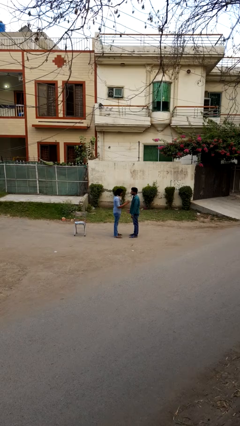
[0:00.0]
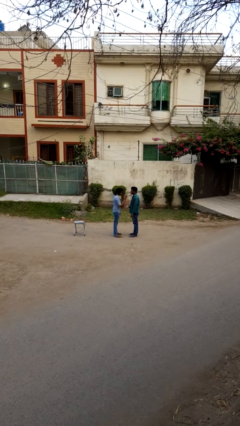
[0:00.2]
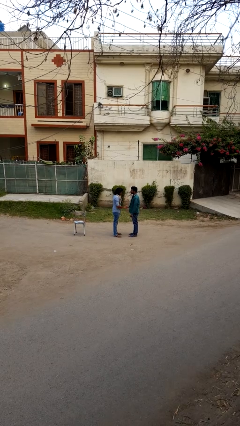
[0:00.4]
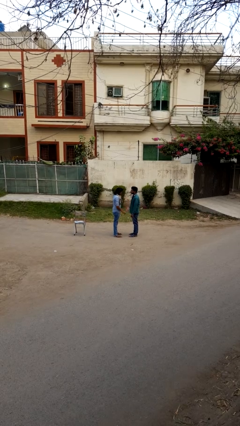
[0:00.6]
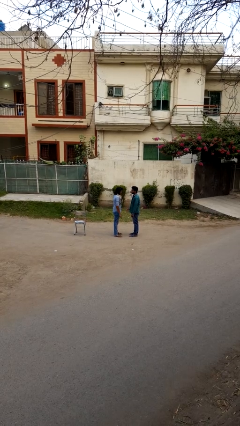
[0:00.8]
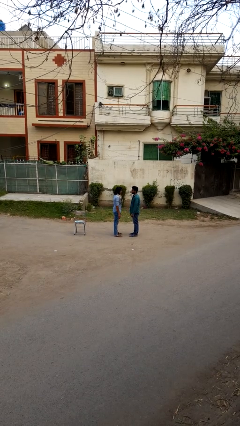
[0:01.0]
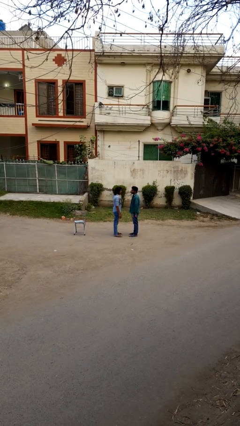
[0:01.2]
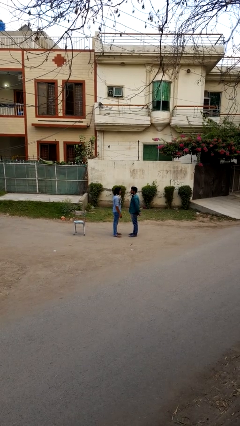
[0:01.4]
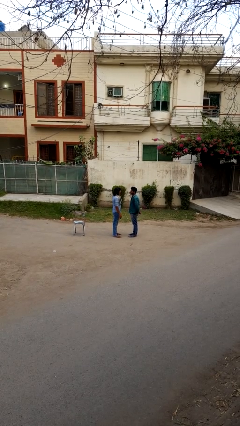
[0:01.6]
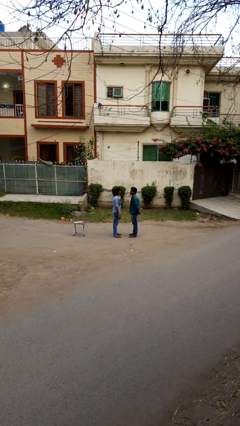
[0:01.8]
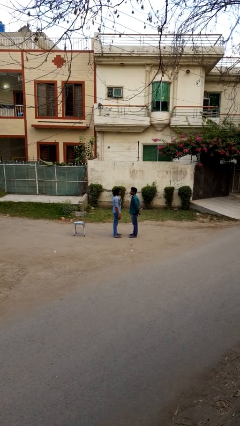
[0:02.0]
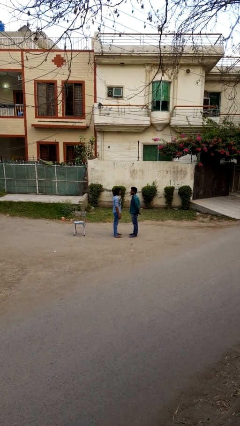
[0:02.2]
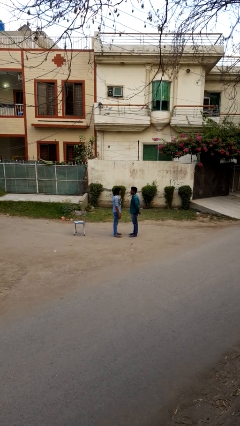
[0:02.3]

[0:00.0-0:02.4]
person highfives hand

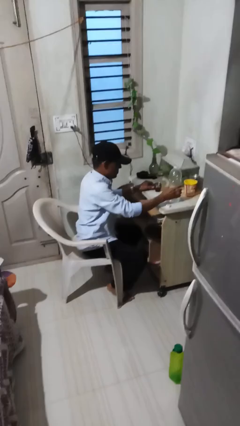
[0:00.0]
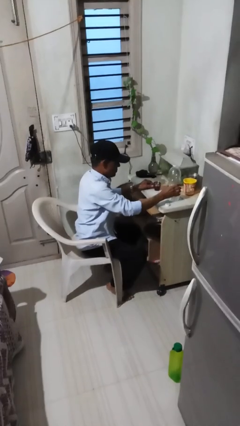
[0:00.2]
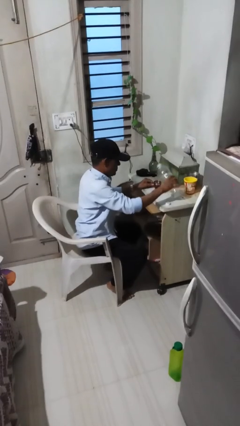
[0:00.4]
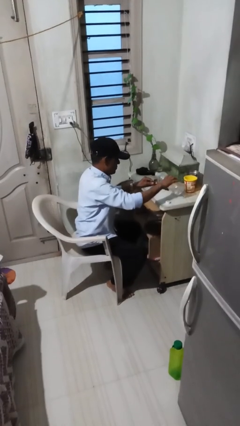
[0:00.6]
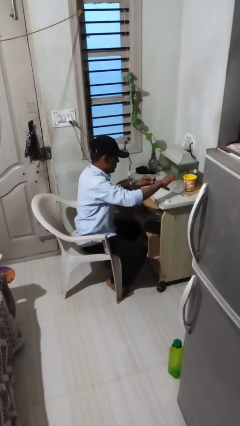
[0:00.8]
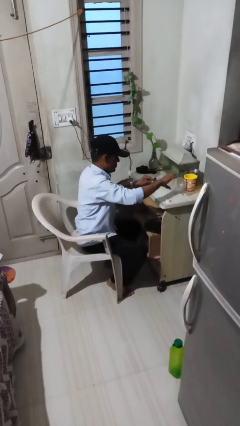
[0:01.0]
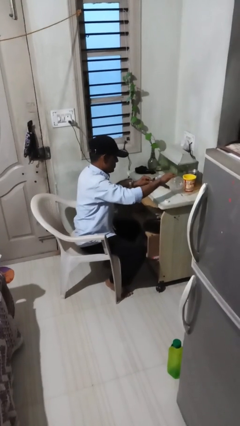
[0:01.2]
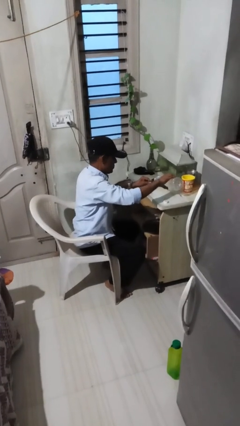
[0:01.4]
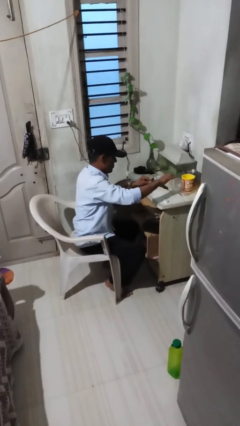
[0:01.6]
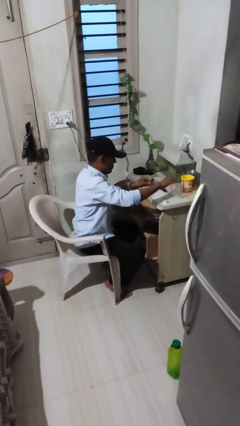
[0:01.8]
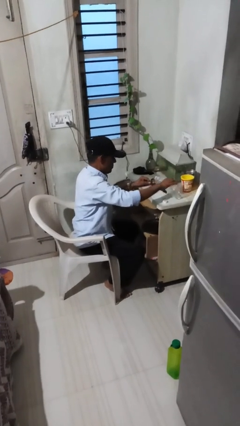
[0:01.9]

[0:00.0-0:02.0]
person pours liquid into cup

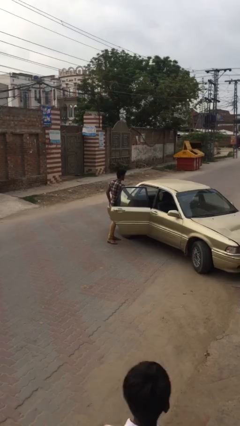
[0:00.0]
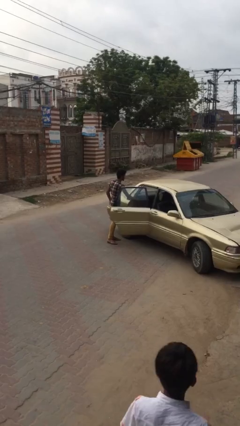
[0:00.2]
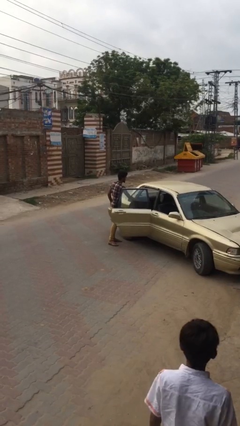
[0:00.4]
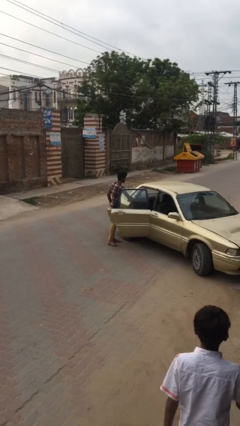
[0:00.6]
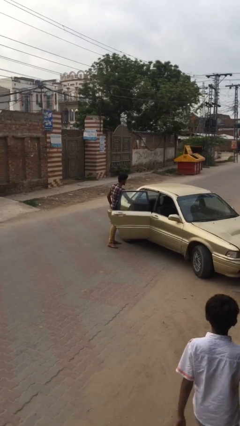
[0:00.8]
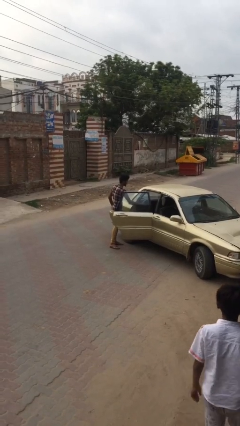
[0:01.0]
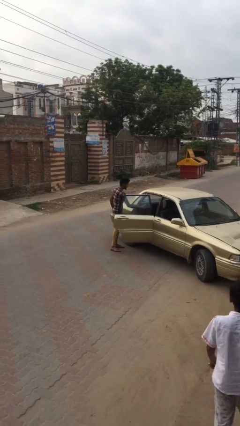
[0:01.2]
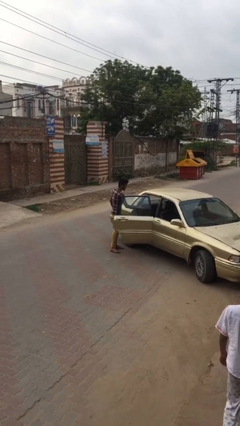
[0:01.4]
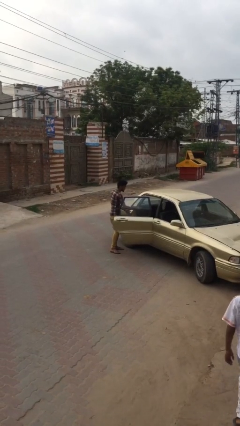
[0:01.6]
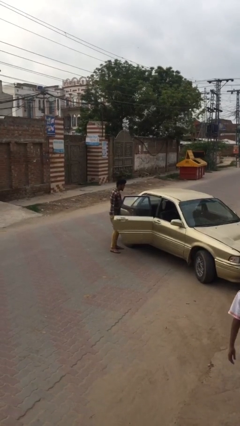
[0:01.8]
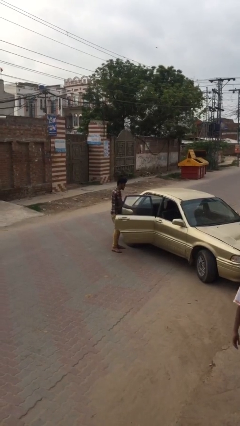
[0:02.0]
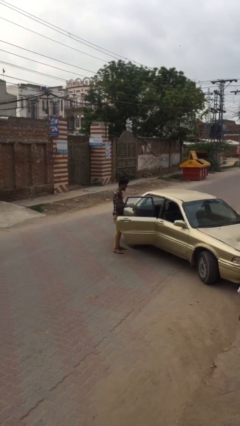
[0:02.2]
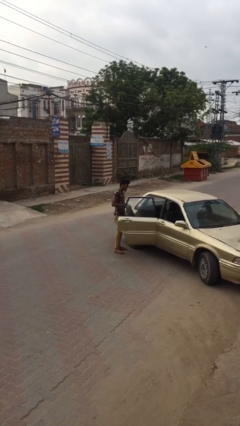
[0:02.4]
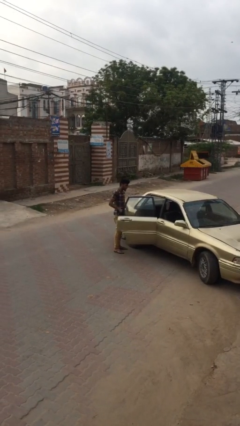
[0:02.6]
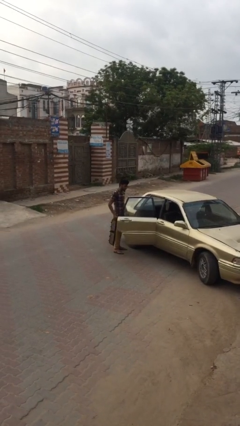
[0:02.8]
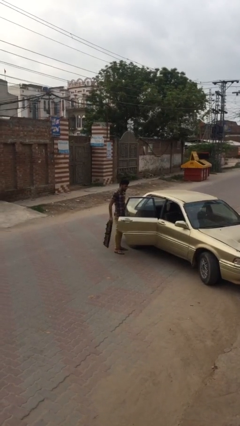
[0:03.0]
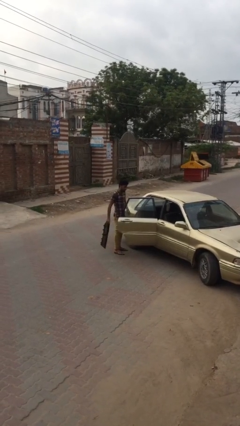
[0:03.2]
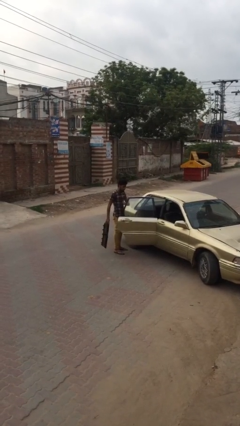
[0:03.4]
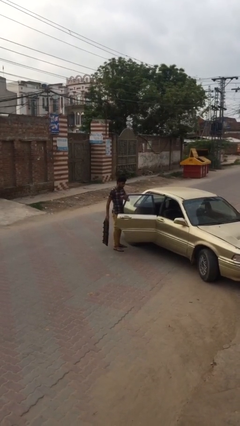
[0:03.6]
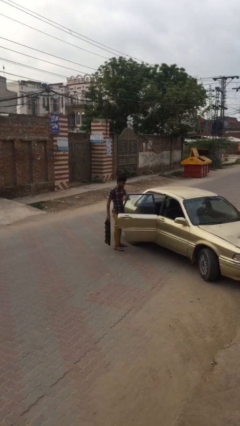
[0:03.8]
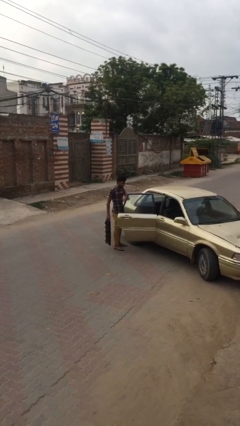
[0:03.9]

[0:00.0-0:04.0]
person unloads car

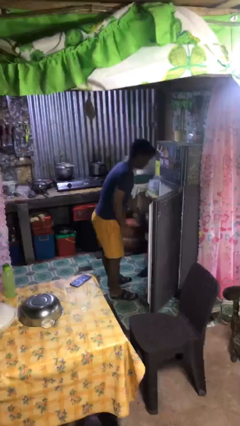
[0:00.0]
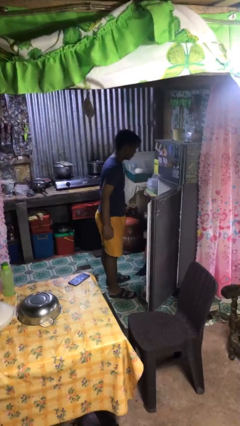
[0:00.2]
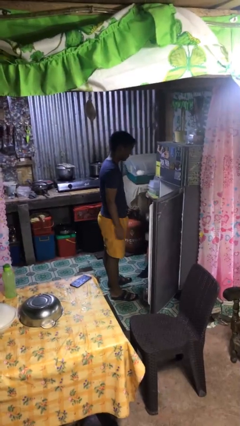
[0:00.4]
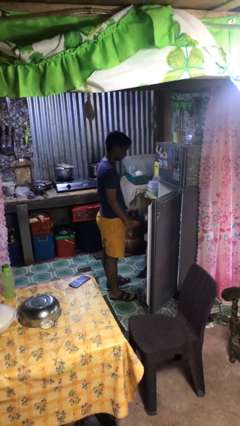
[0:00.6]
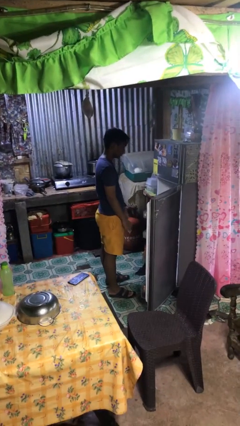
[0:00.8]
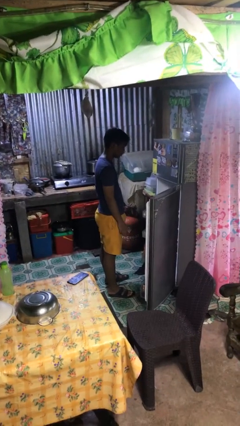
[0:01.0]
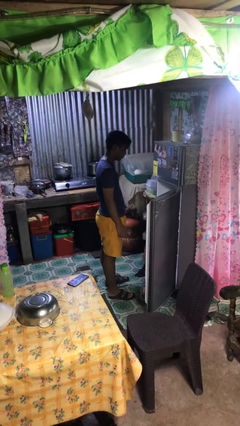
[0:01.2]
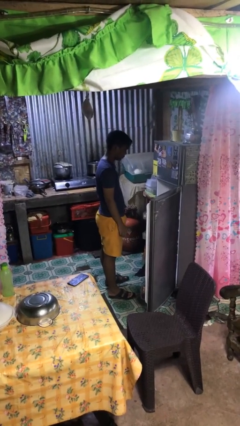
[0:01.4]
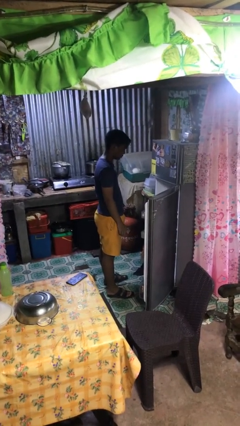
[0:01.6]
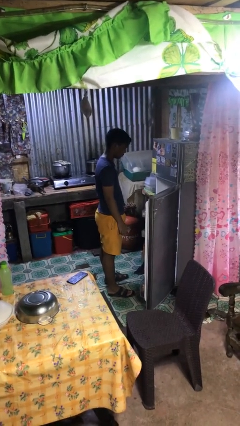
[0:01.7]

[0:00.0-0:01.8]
person takes object from refrigerator

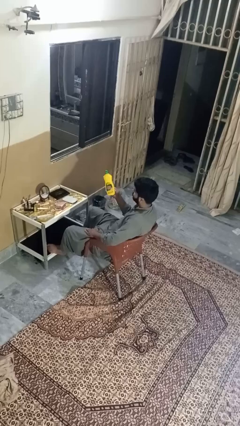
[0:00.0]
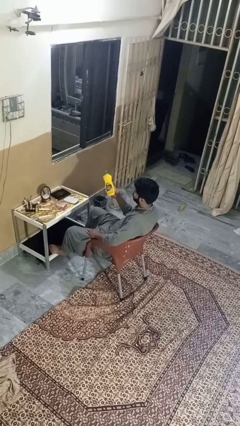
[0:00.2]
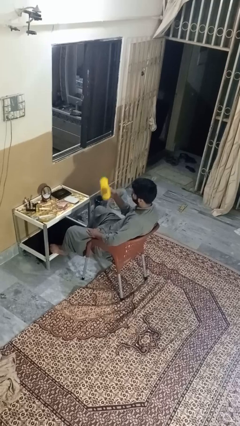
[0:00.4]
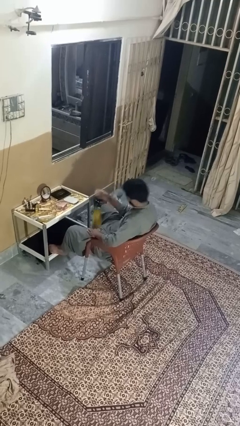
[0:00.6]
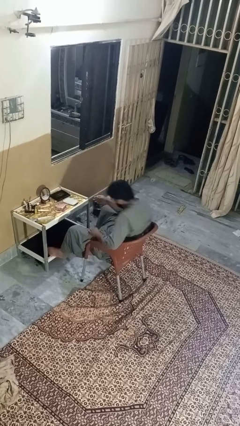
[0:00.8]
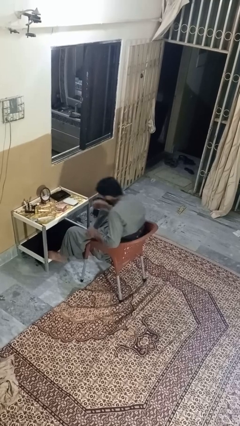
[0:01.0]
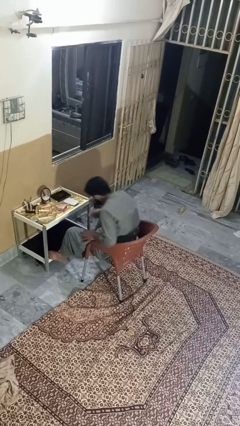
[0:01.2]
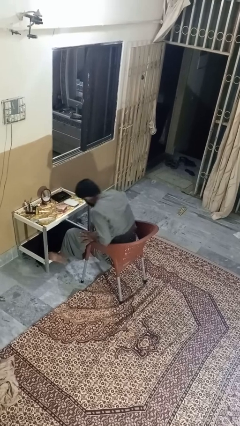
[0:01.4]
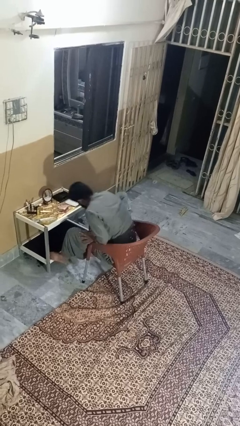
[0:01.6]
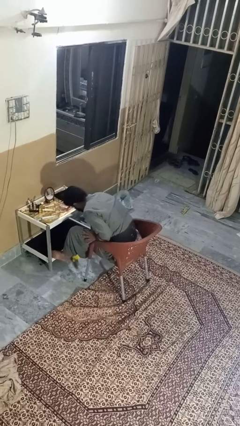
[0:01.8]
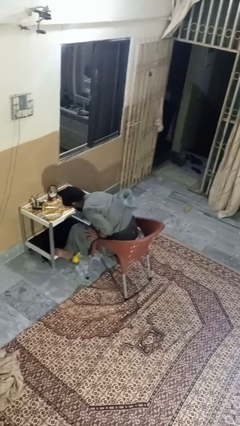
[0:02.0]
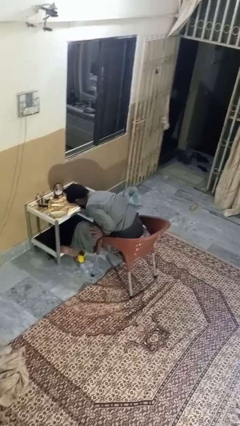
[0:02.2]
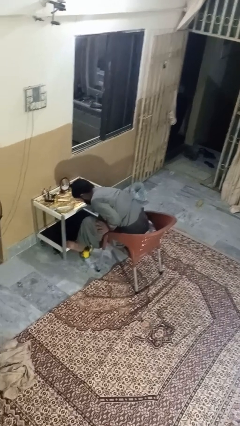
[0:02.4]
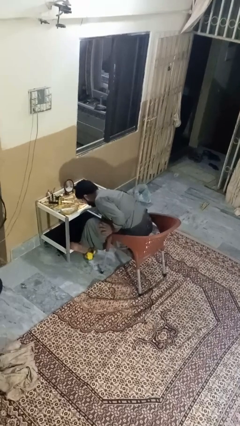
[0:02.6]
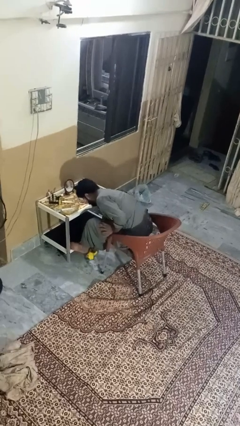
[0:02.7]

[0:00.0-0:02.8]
person throws object to ground

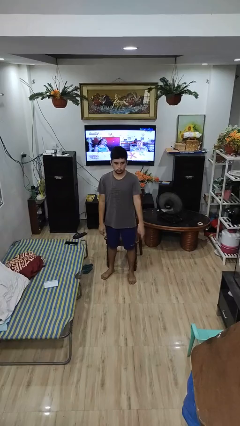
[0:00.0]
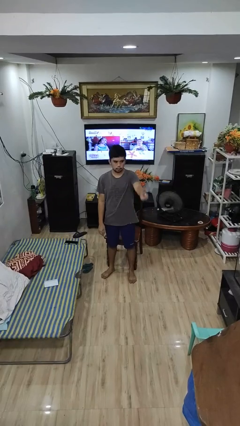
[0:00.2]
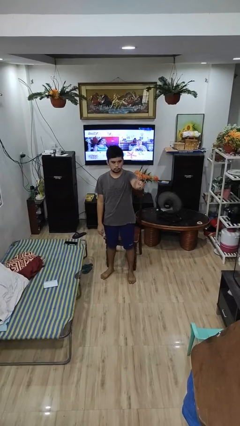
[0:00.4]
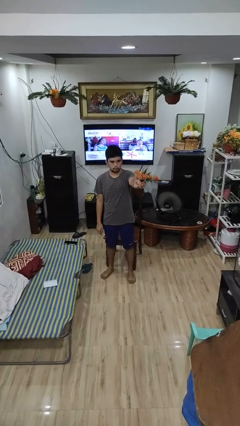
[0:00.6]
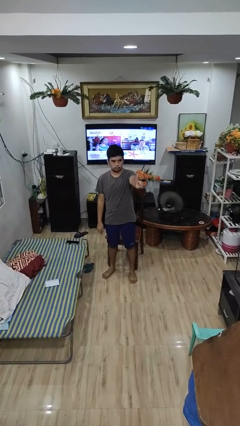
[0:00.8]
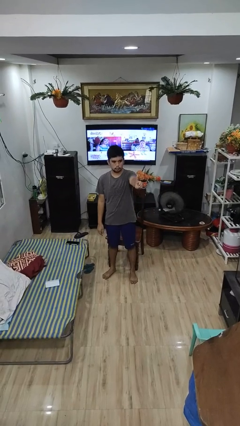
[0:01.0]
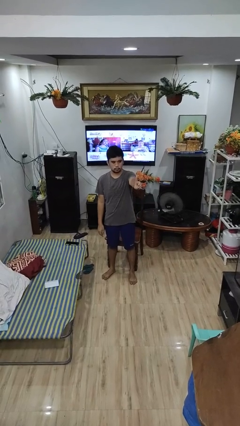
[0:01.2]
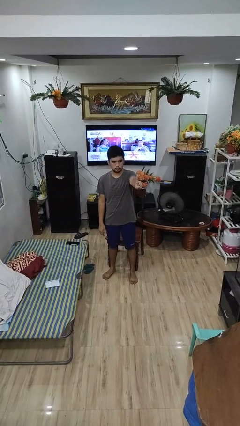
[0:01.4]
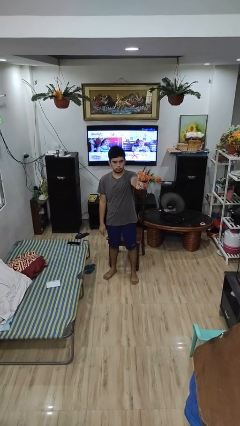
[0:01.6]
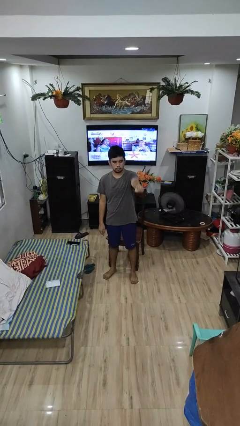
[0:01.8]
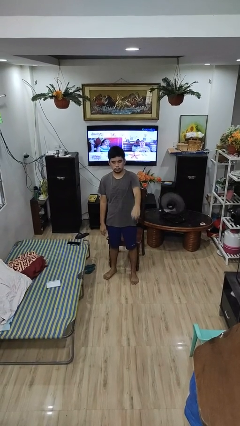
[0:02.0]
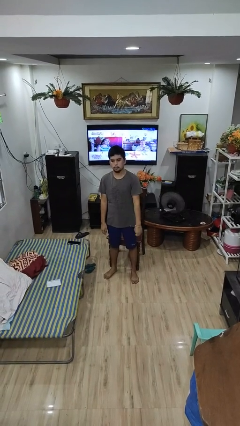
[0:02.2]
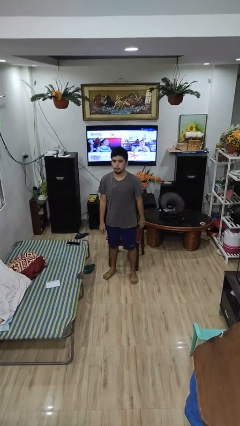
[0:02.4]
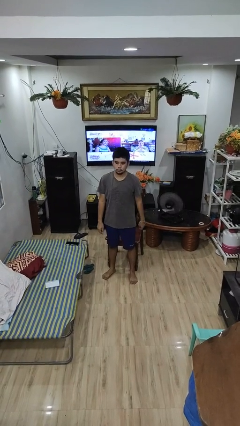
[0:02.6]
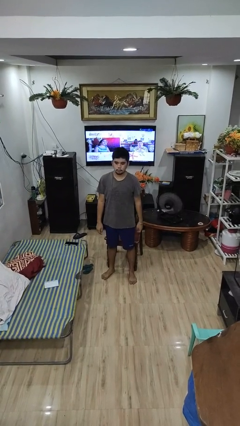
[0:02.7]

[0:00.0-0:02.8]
person gestures number one

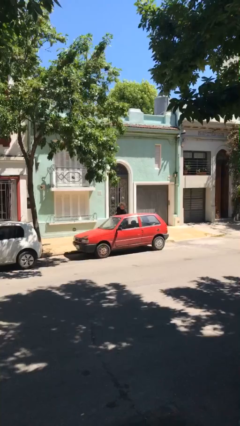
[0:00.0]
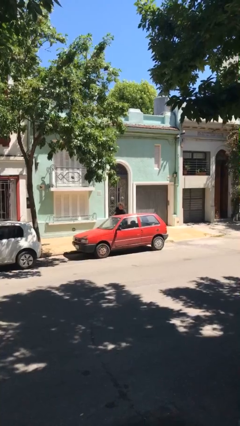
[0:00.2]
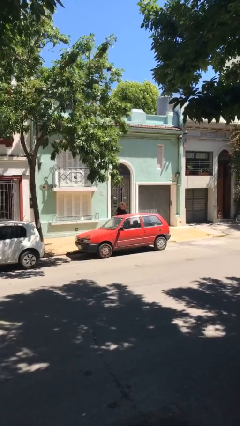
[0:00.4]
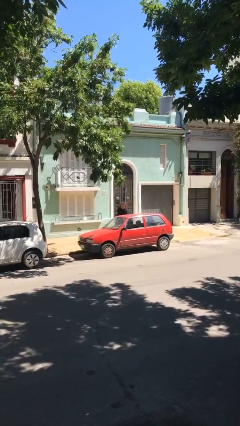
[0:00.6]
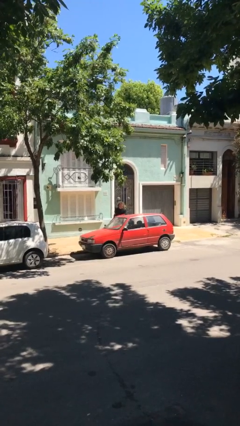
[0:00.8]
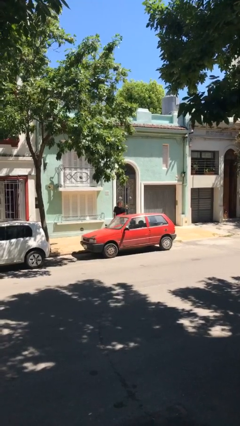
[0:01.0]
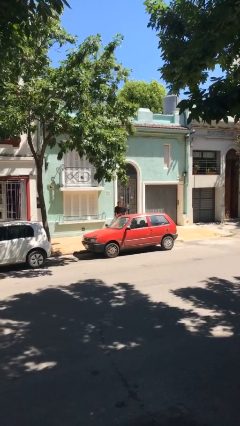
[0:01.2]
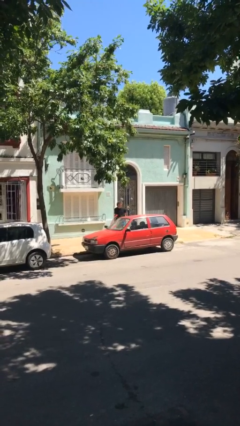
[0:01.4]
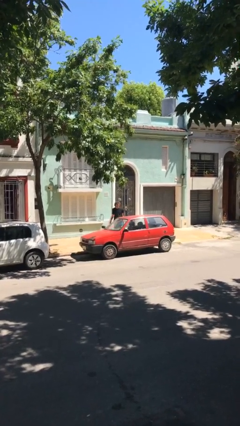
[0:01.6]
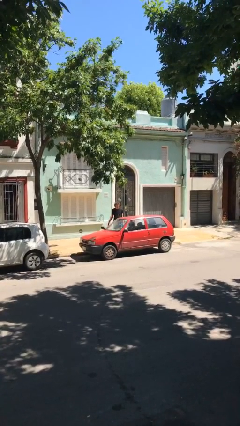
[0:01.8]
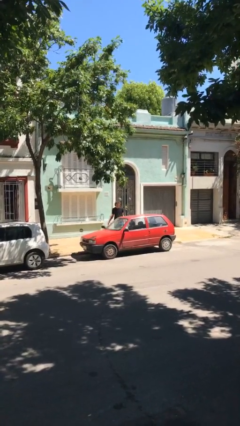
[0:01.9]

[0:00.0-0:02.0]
person opens car door
